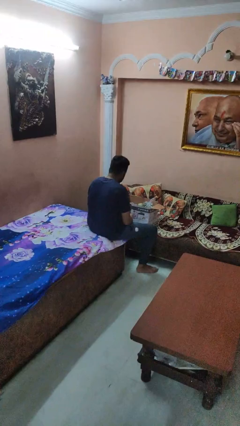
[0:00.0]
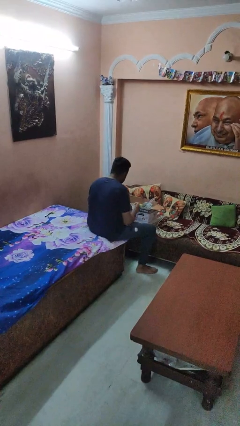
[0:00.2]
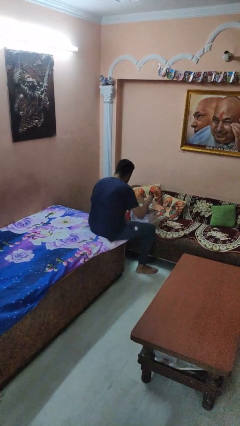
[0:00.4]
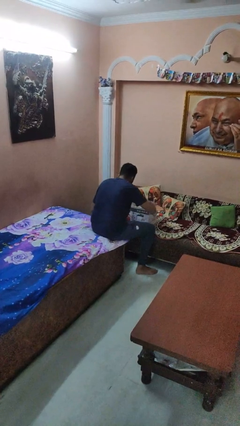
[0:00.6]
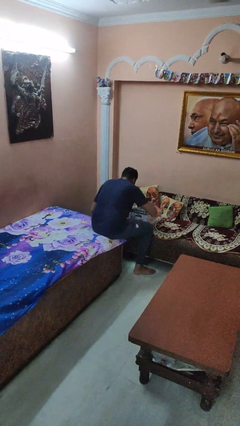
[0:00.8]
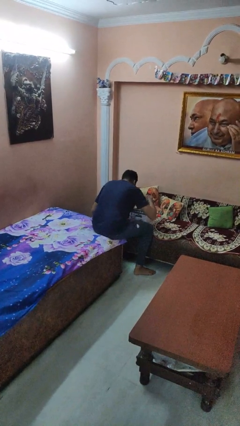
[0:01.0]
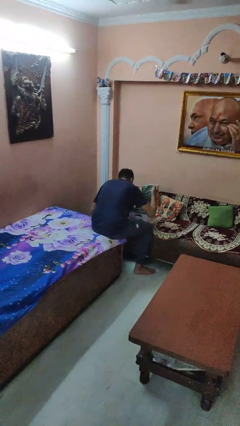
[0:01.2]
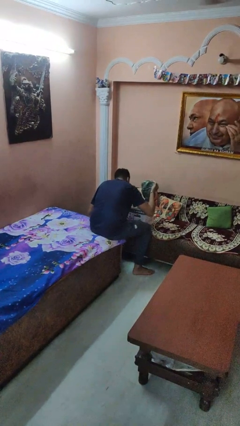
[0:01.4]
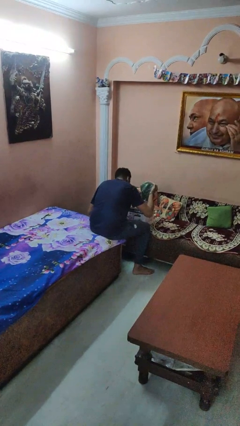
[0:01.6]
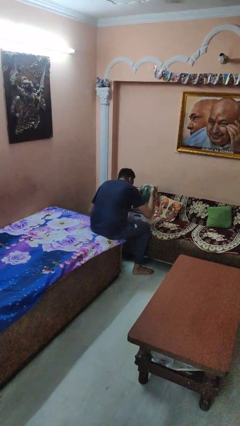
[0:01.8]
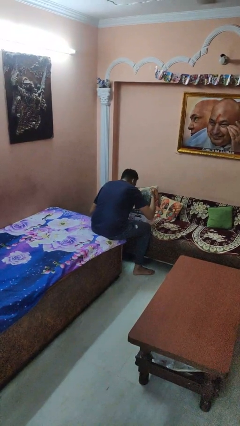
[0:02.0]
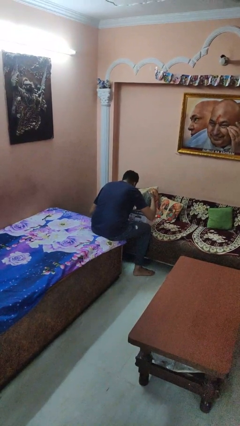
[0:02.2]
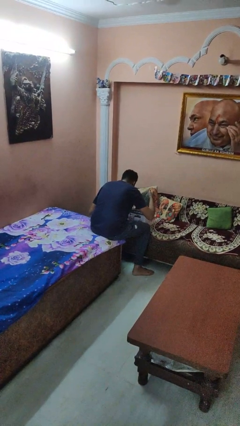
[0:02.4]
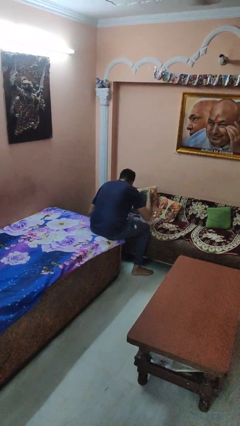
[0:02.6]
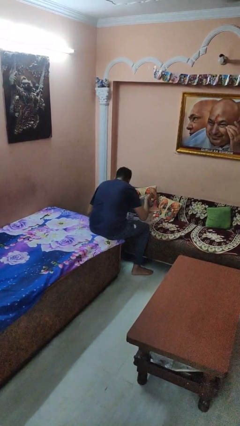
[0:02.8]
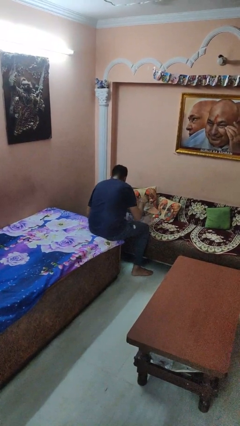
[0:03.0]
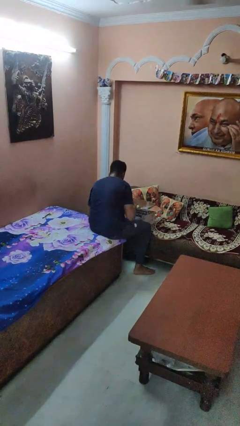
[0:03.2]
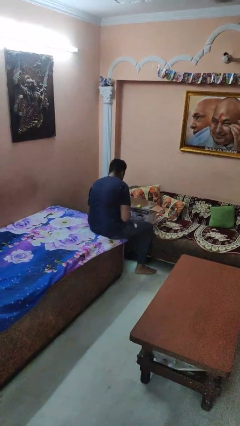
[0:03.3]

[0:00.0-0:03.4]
person searches in box

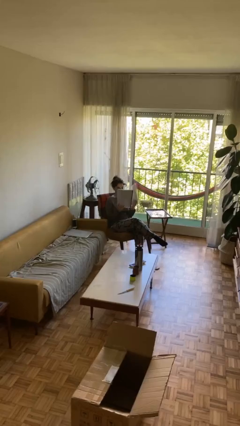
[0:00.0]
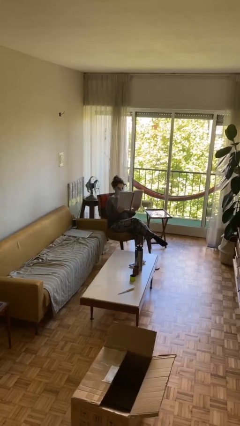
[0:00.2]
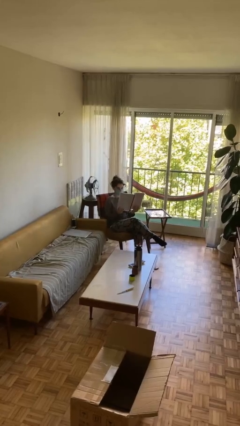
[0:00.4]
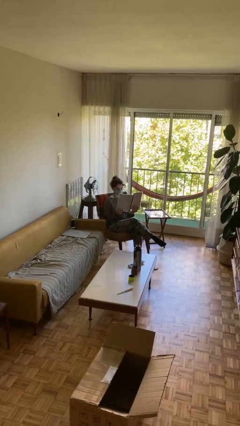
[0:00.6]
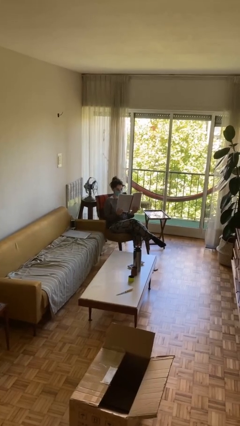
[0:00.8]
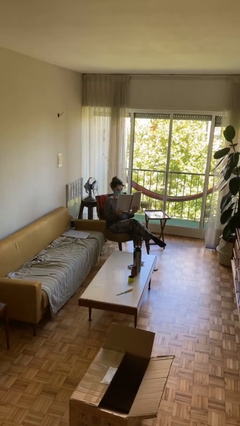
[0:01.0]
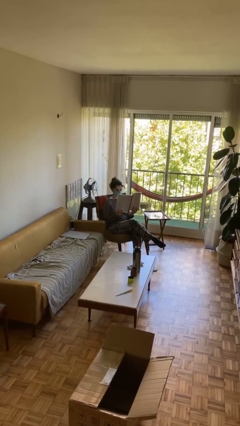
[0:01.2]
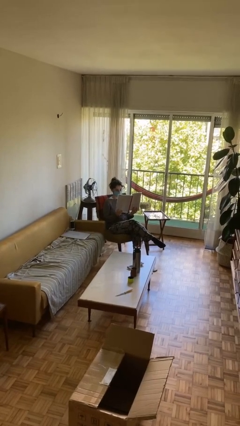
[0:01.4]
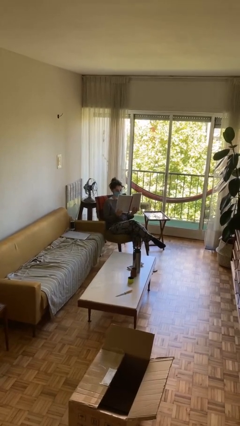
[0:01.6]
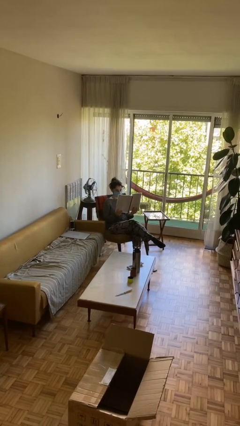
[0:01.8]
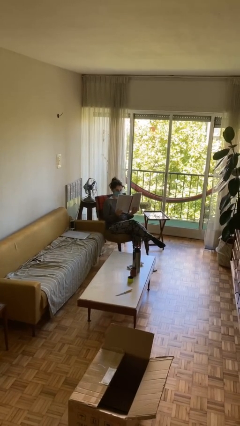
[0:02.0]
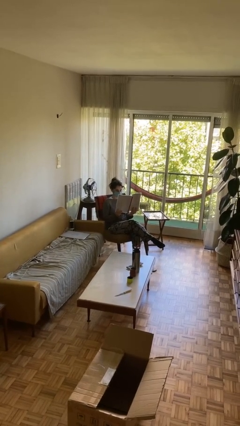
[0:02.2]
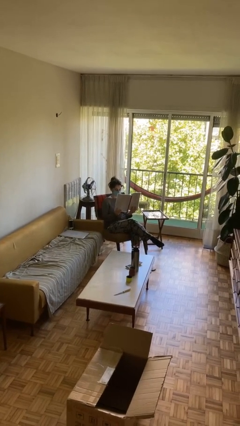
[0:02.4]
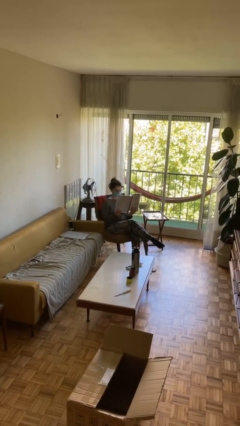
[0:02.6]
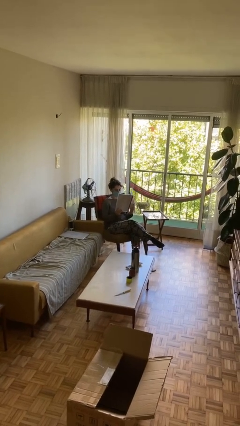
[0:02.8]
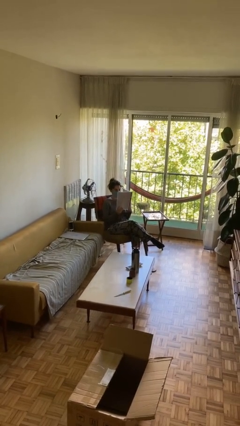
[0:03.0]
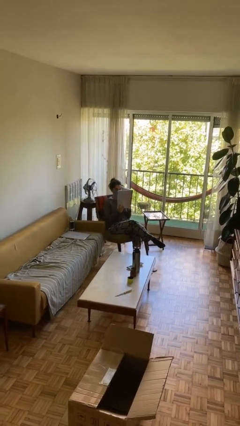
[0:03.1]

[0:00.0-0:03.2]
person reads document

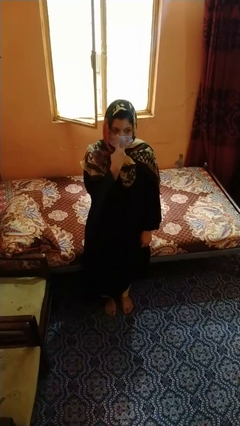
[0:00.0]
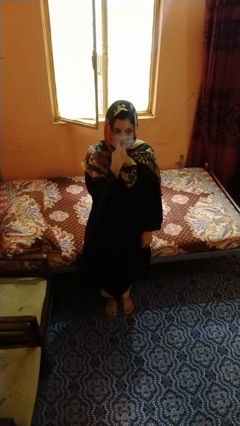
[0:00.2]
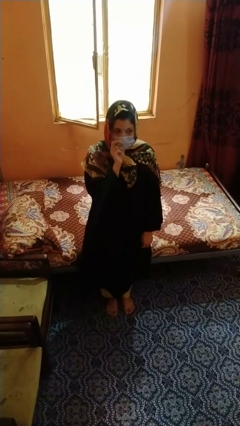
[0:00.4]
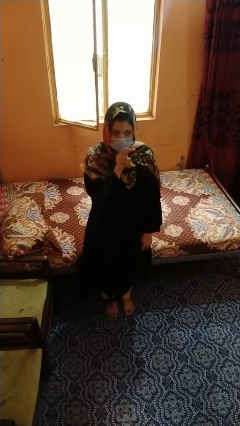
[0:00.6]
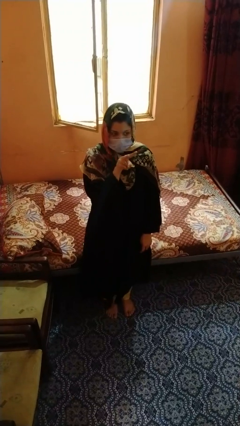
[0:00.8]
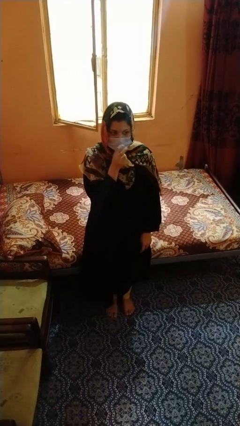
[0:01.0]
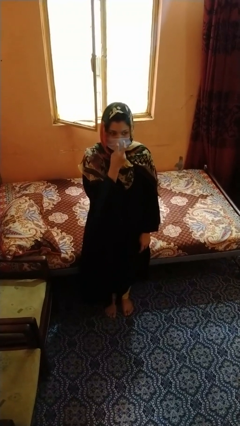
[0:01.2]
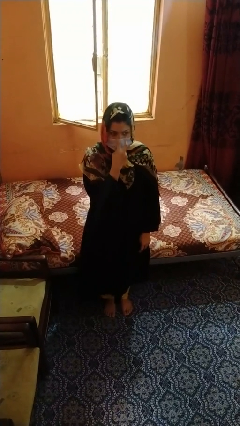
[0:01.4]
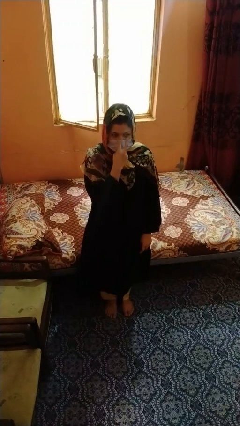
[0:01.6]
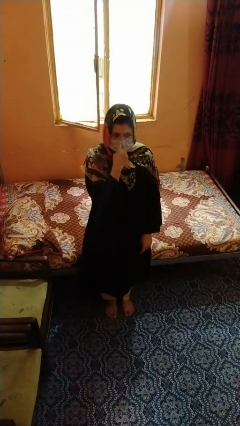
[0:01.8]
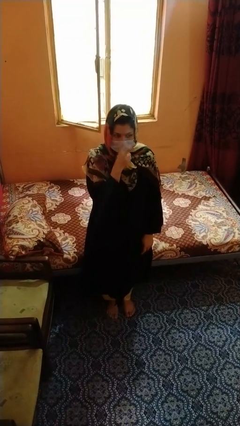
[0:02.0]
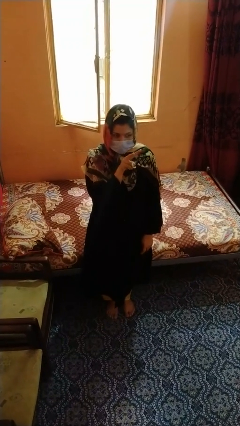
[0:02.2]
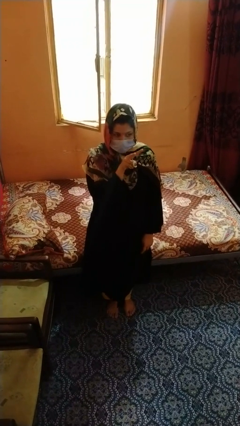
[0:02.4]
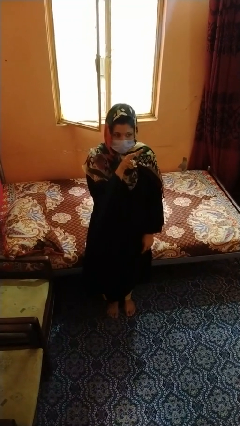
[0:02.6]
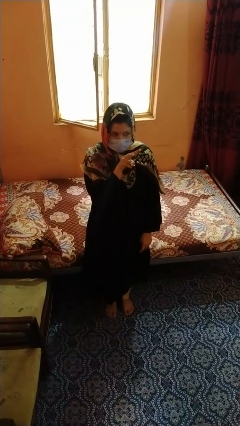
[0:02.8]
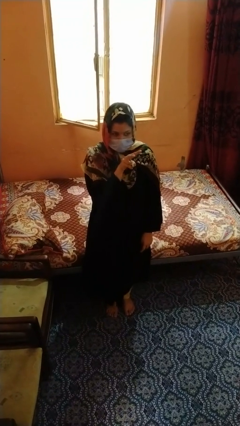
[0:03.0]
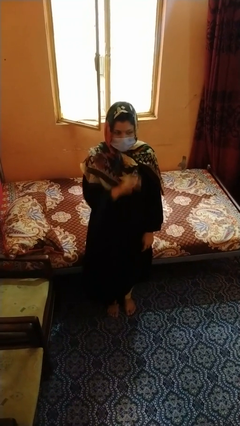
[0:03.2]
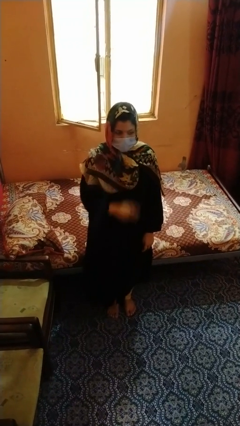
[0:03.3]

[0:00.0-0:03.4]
person gestures watch closely

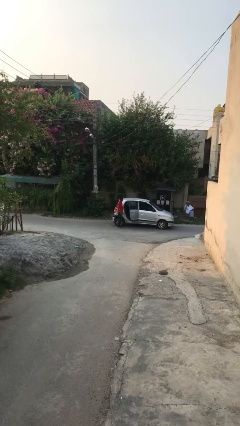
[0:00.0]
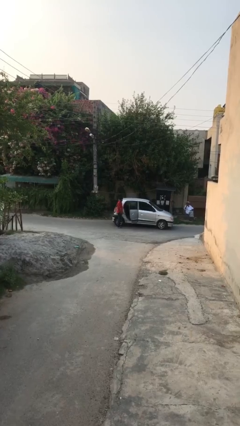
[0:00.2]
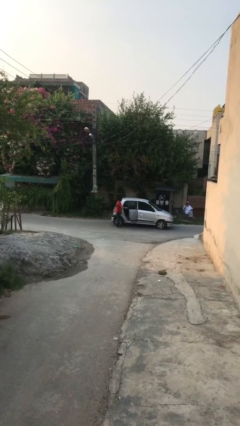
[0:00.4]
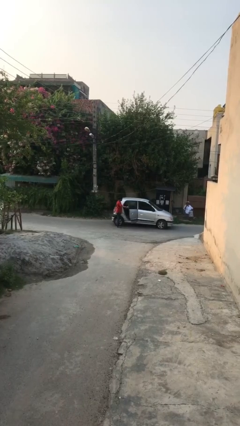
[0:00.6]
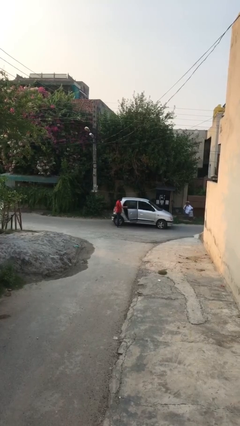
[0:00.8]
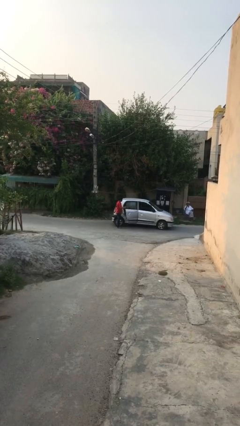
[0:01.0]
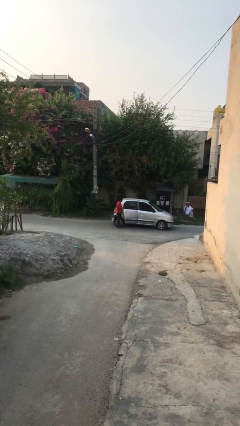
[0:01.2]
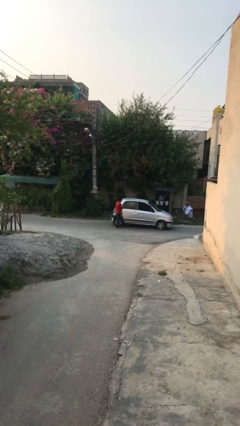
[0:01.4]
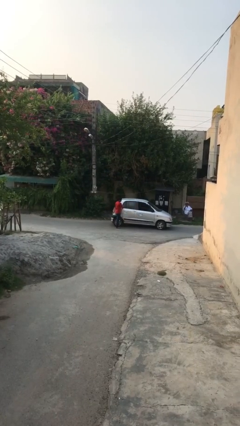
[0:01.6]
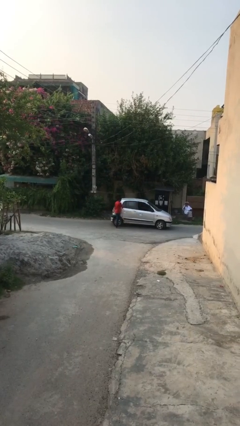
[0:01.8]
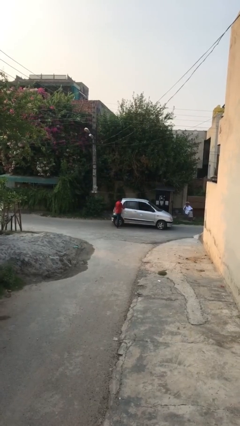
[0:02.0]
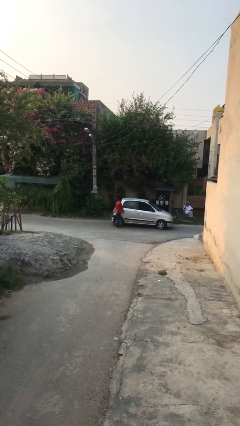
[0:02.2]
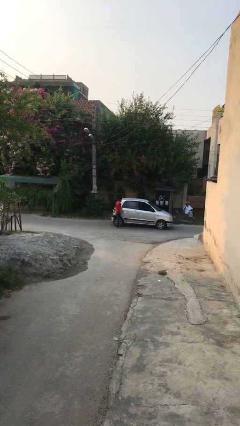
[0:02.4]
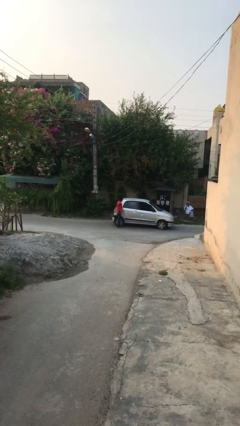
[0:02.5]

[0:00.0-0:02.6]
person closes car door

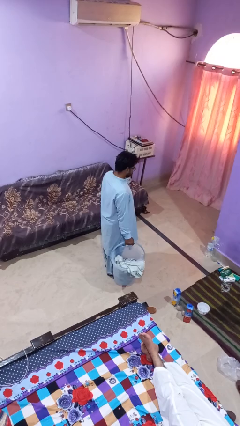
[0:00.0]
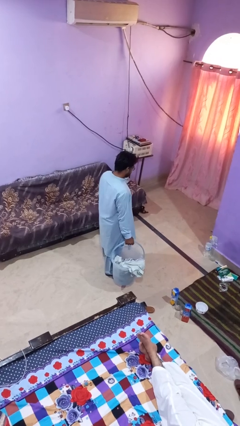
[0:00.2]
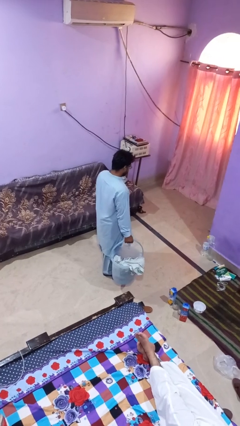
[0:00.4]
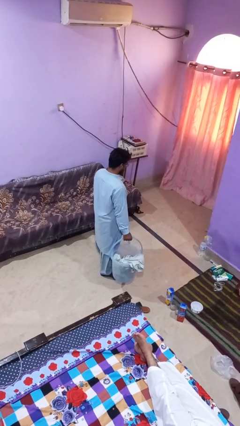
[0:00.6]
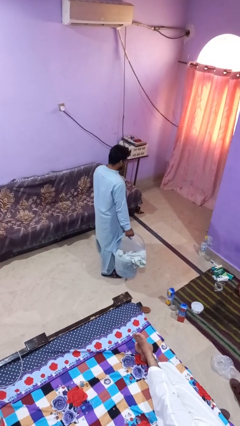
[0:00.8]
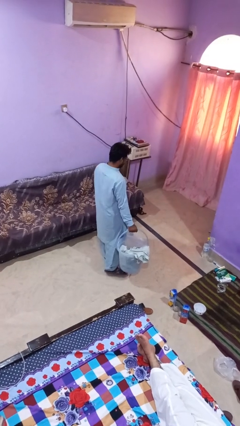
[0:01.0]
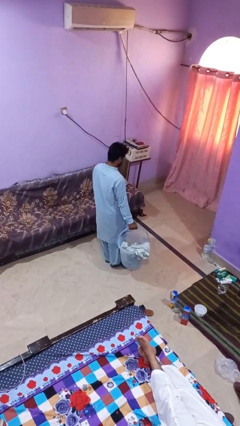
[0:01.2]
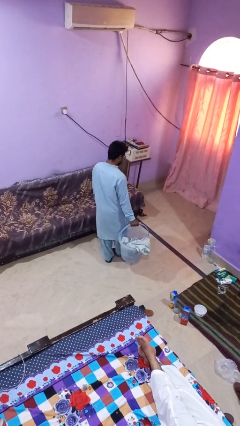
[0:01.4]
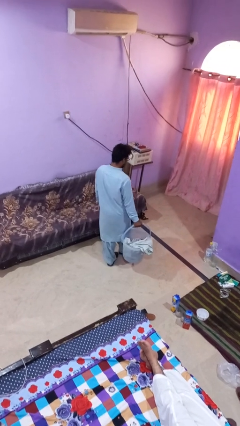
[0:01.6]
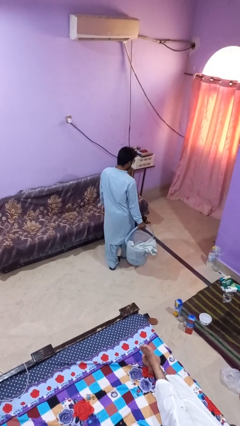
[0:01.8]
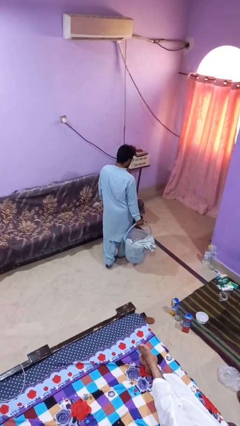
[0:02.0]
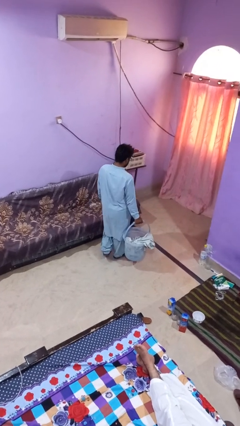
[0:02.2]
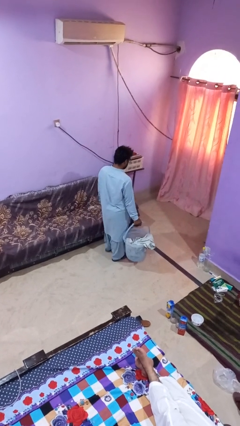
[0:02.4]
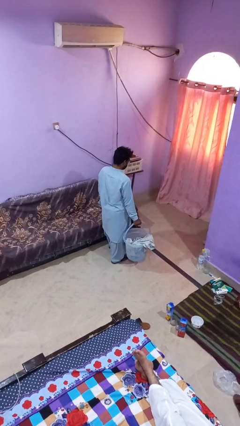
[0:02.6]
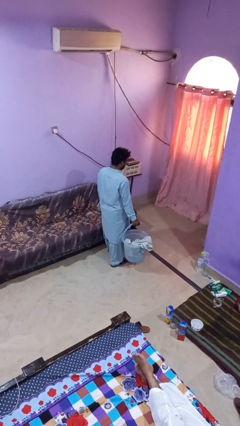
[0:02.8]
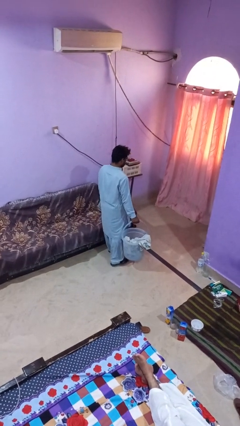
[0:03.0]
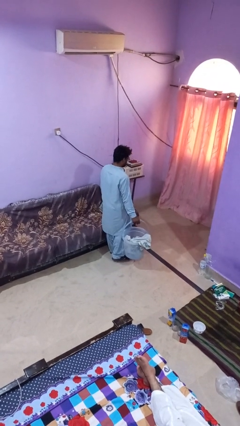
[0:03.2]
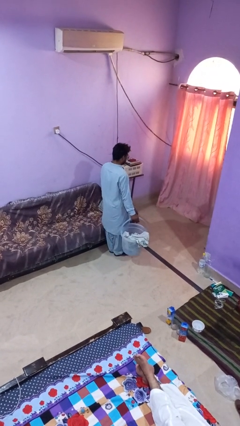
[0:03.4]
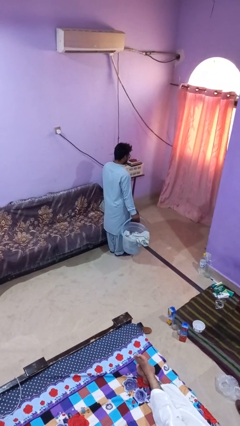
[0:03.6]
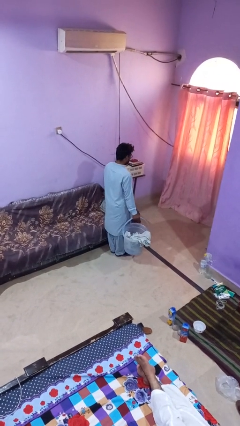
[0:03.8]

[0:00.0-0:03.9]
person carries laundry basket

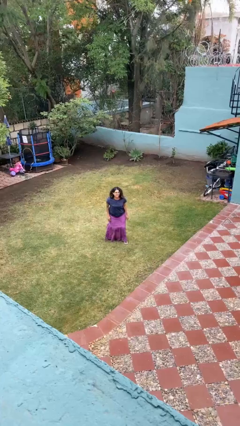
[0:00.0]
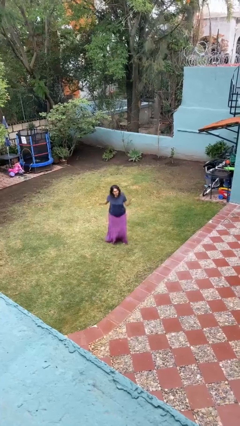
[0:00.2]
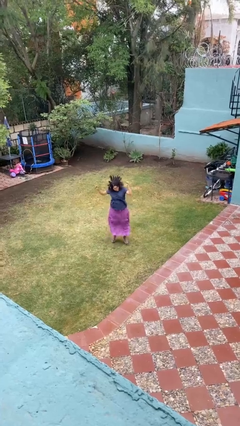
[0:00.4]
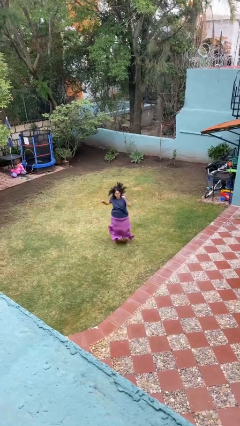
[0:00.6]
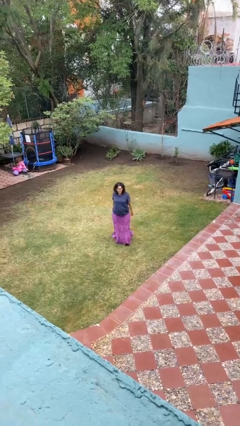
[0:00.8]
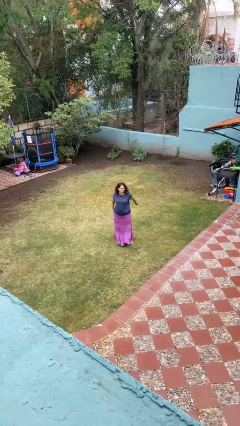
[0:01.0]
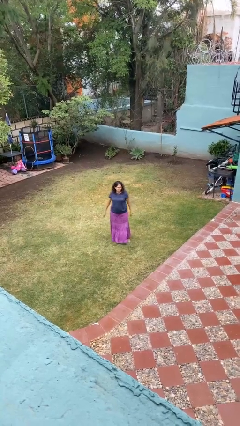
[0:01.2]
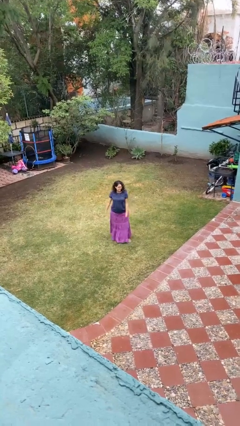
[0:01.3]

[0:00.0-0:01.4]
person jumps
